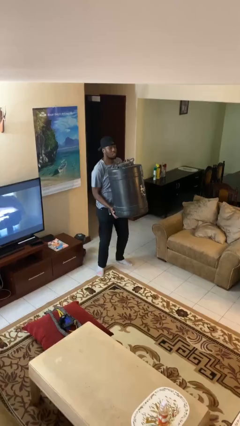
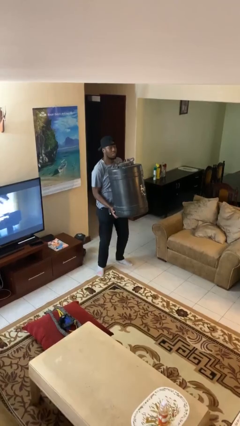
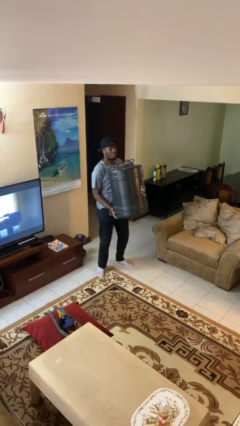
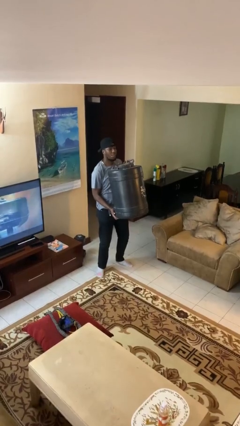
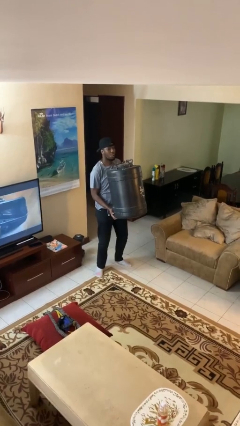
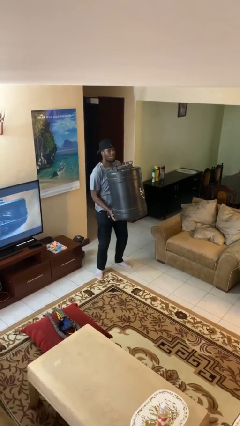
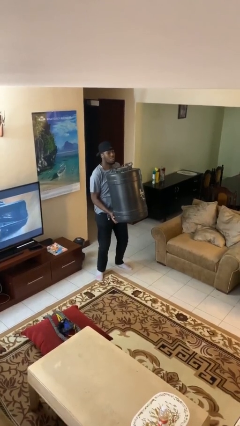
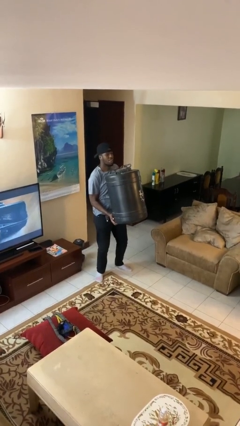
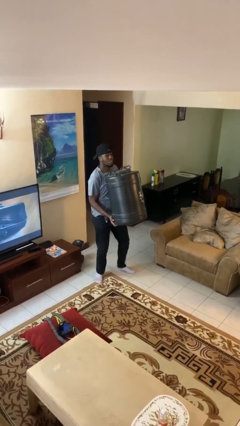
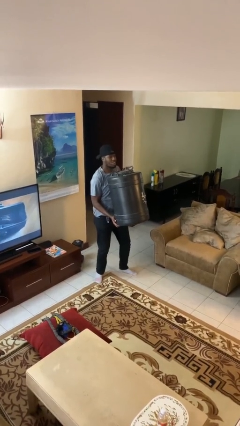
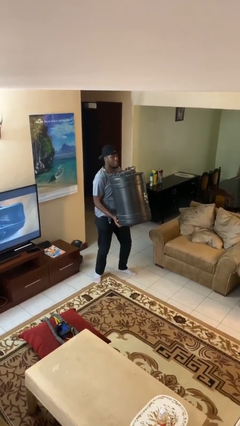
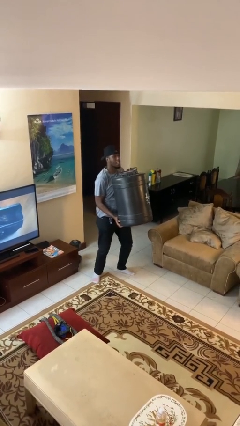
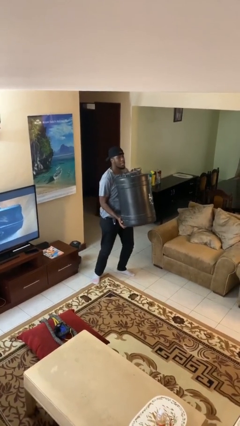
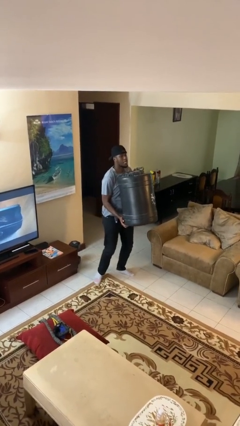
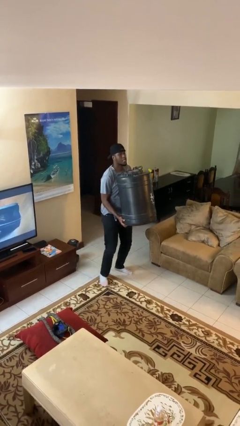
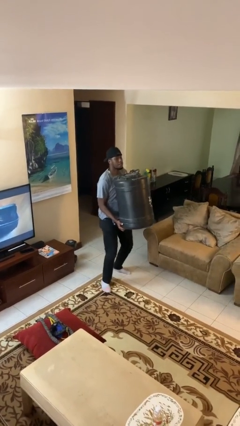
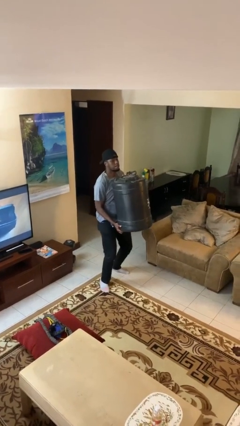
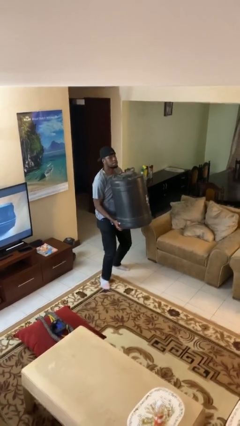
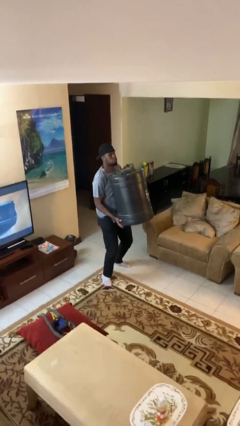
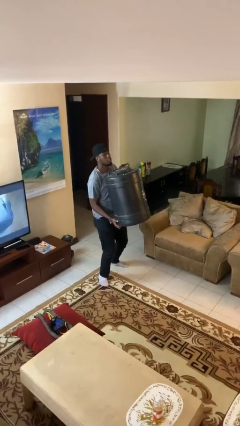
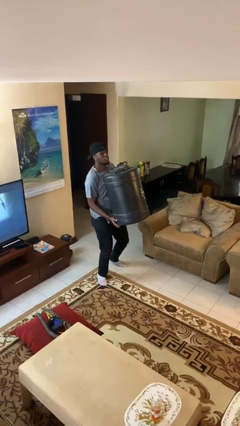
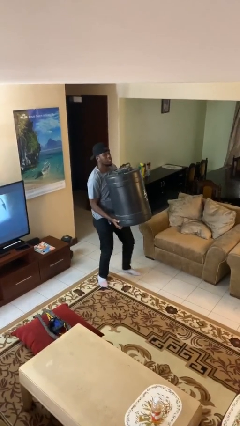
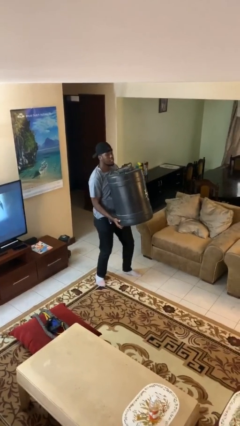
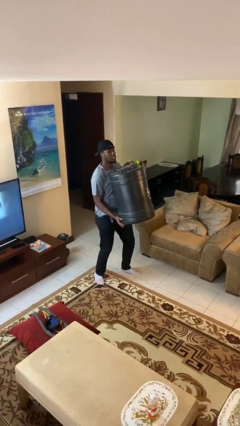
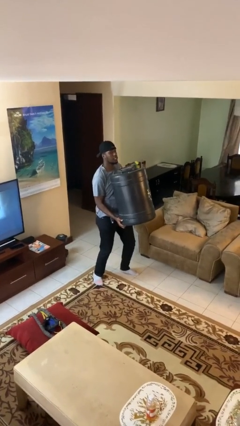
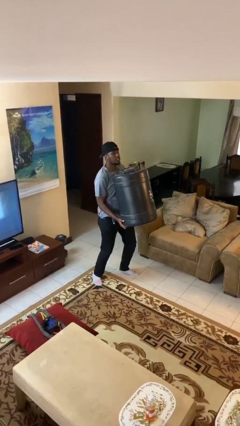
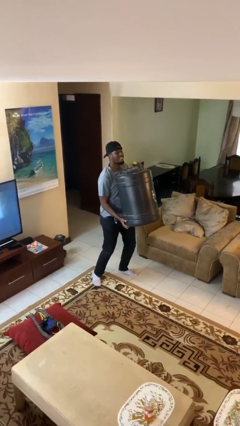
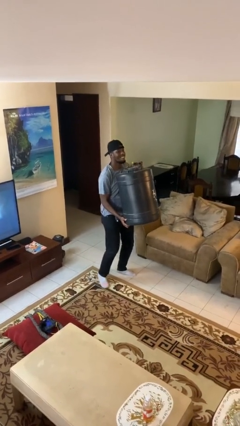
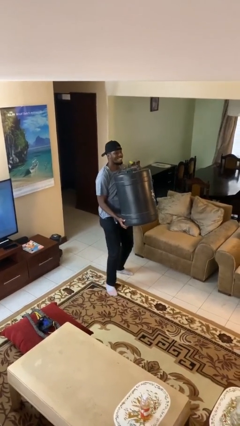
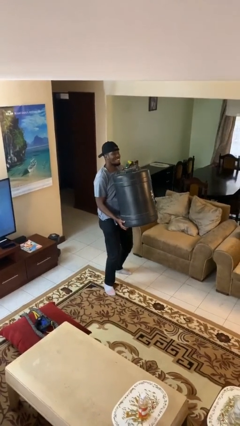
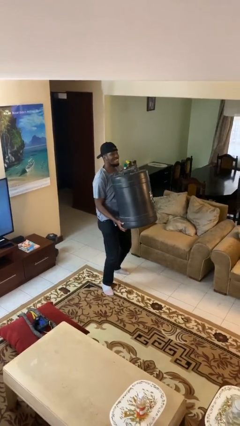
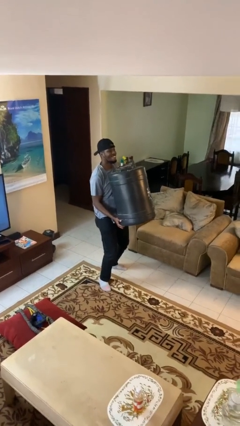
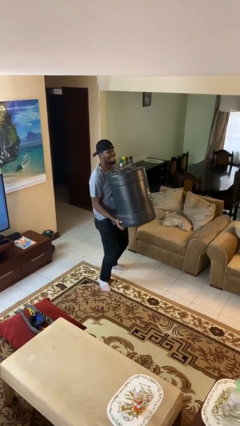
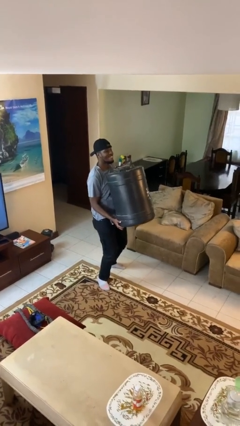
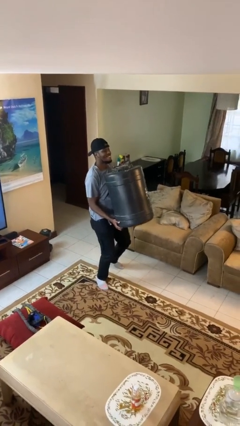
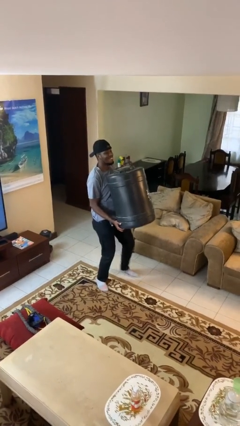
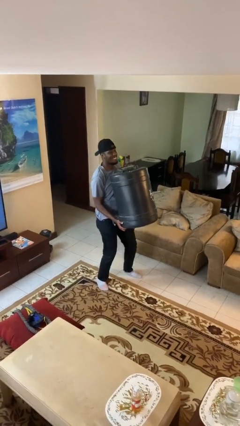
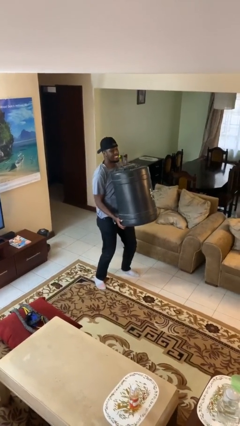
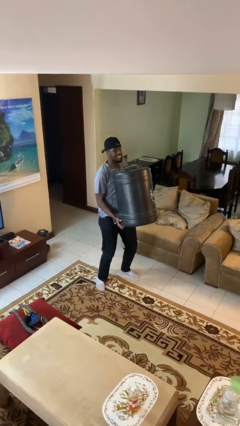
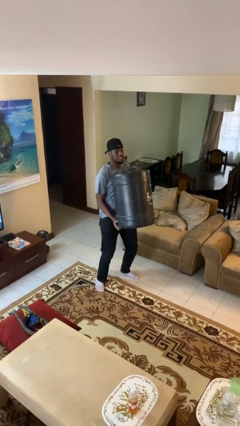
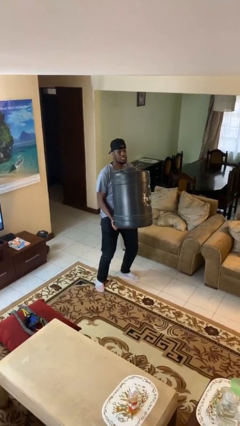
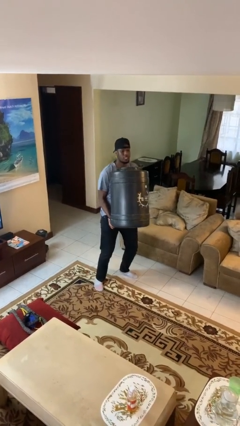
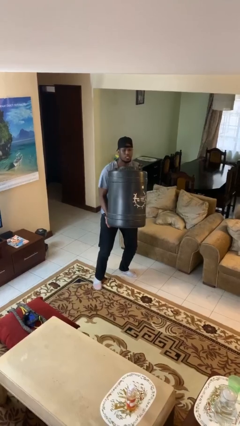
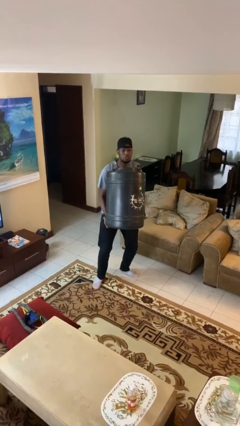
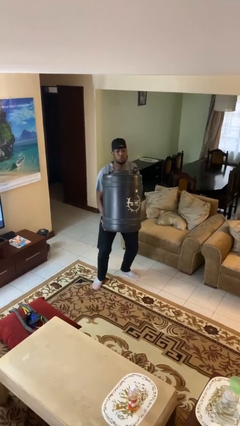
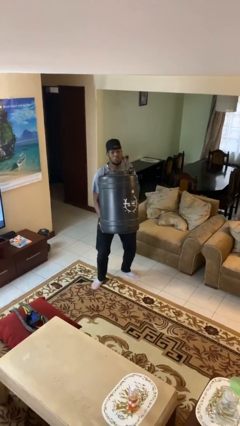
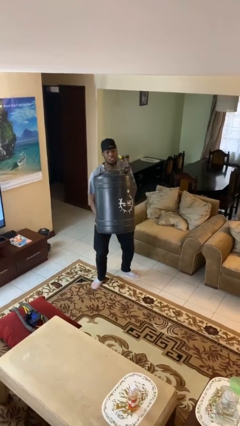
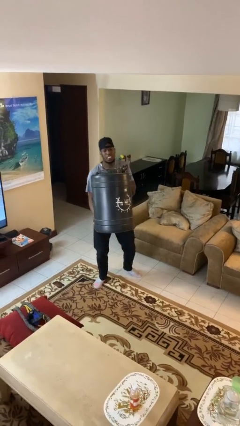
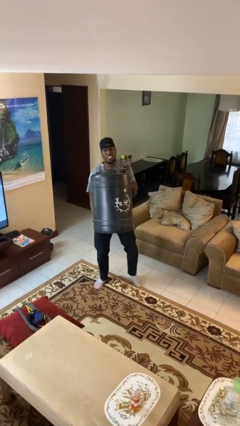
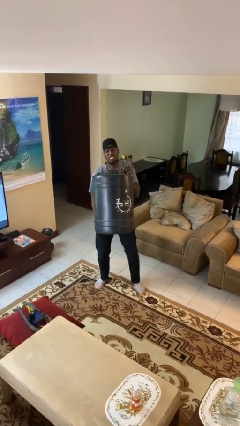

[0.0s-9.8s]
person carries heavy object

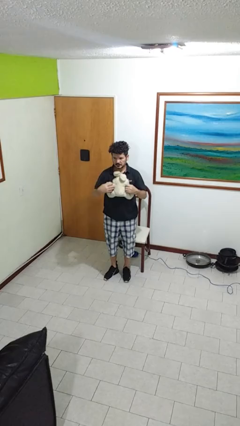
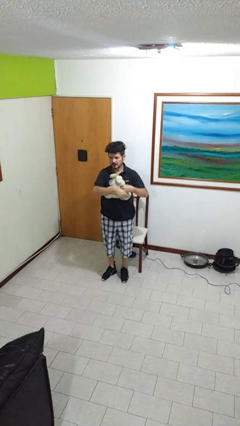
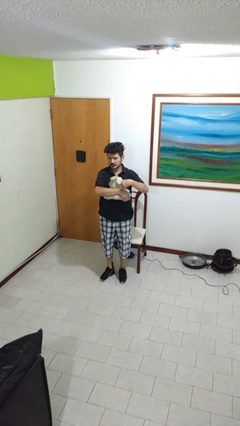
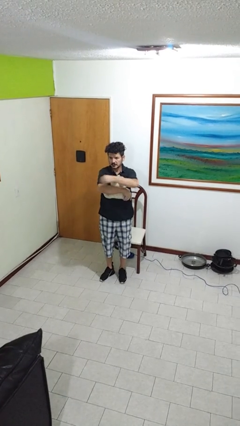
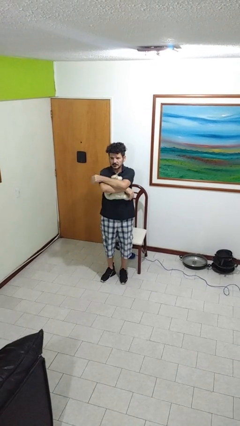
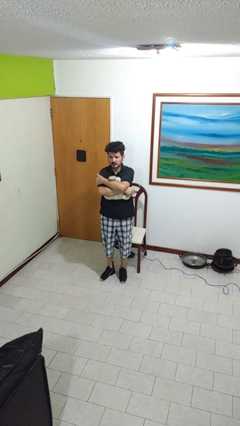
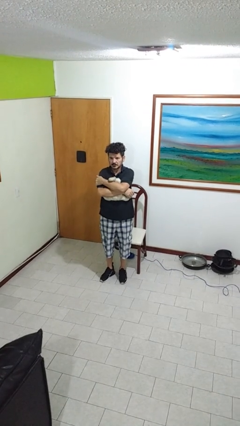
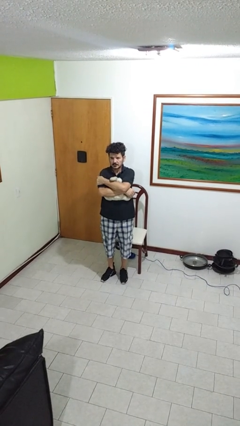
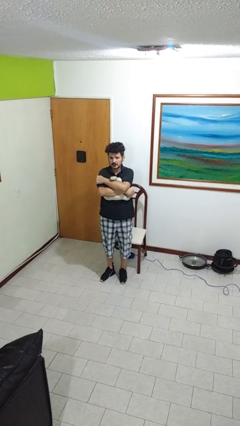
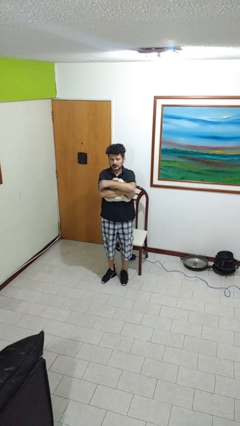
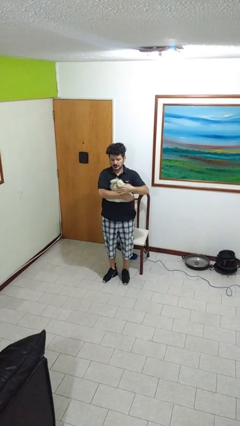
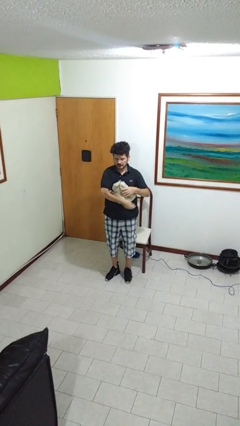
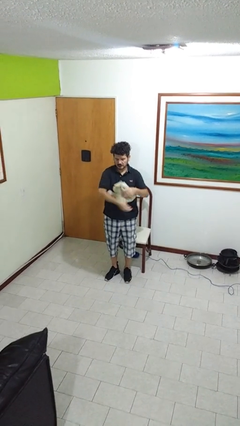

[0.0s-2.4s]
person hugs stuffed animal

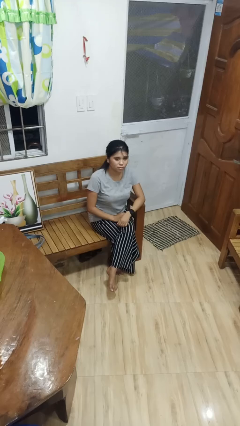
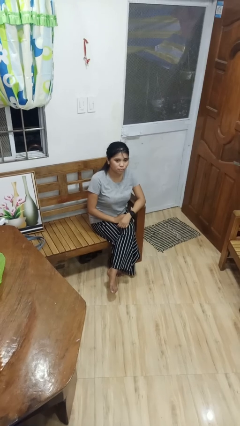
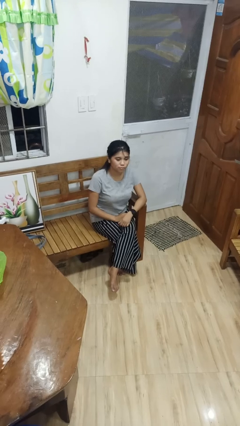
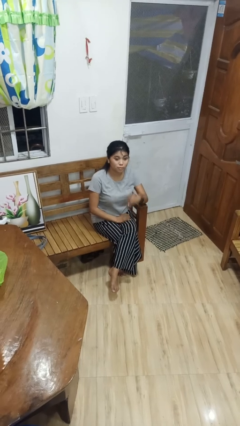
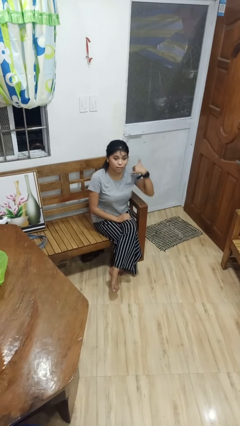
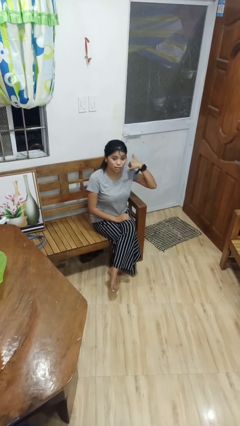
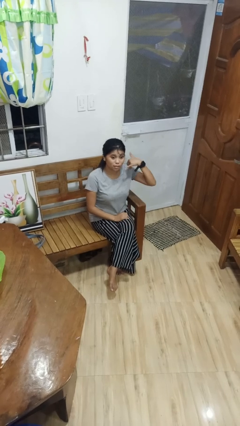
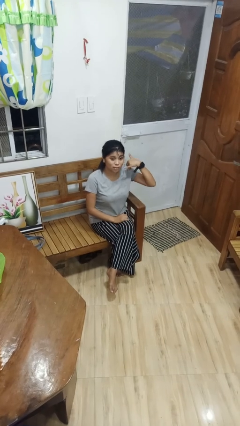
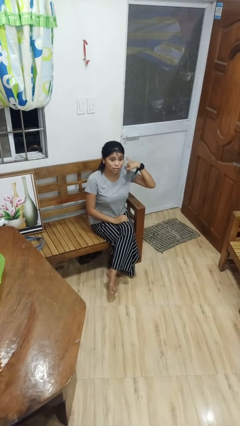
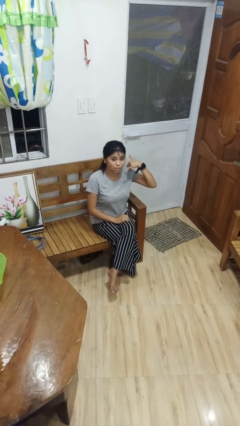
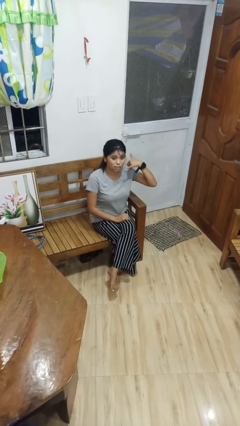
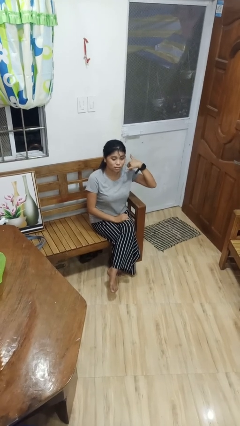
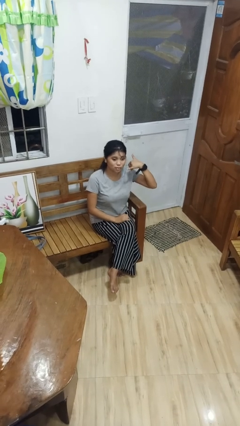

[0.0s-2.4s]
person gestures call me

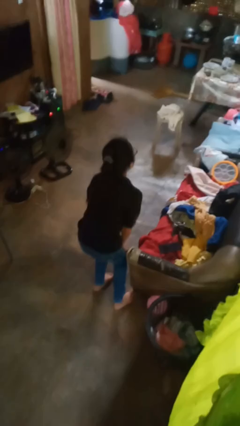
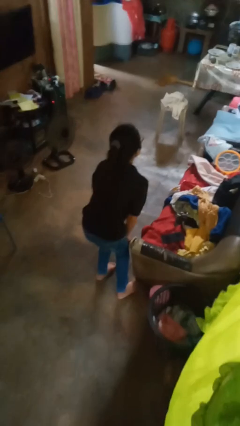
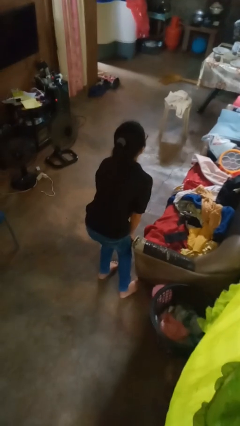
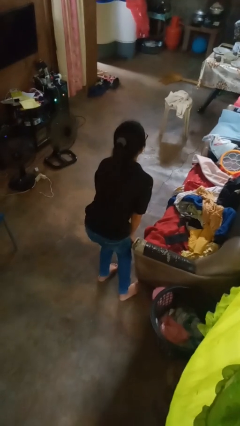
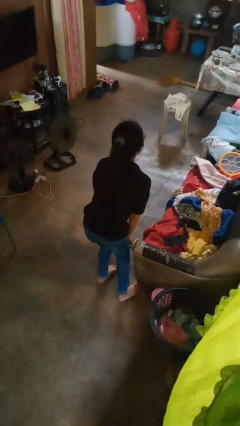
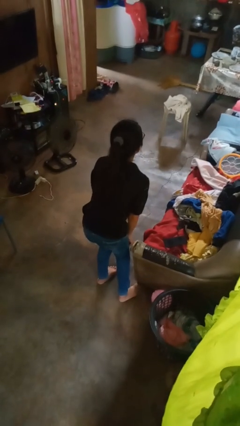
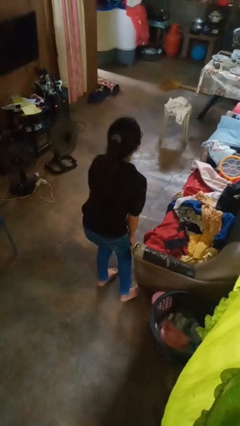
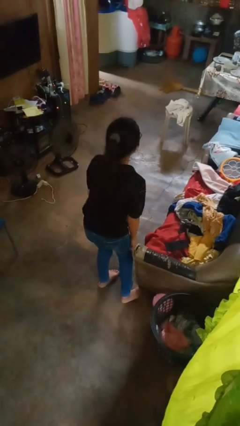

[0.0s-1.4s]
person stubs toe

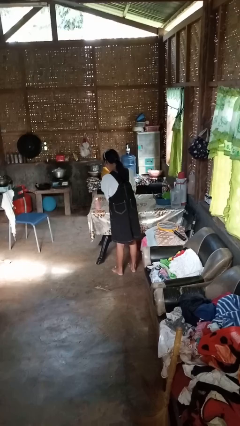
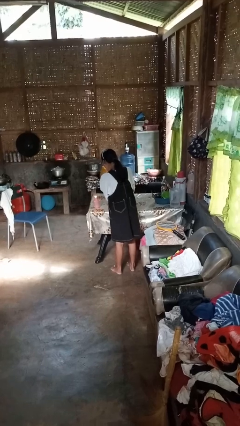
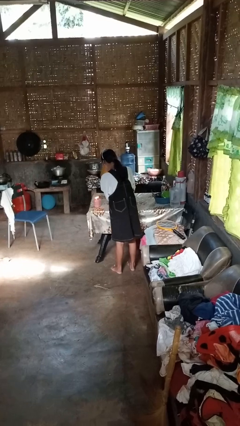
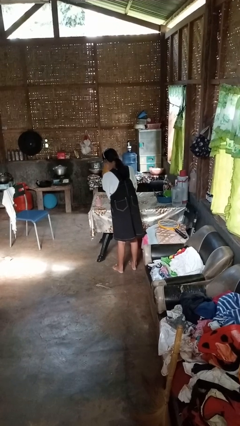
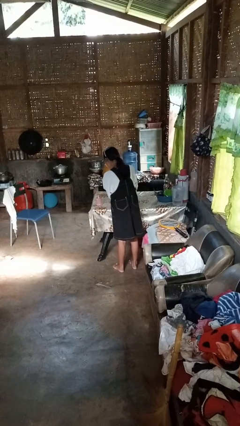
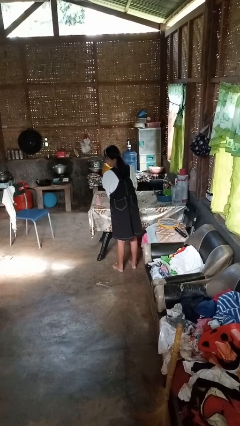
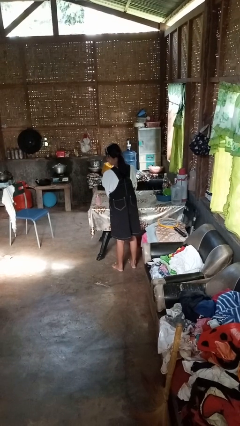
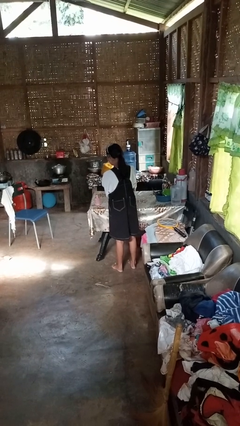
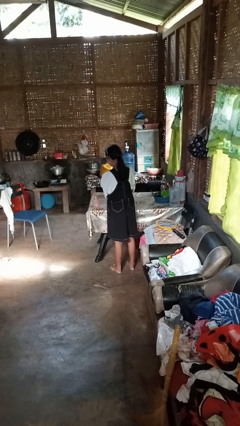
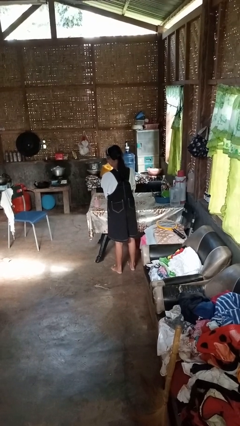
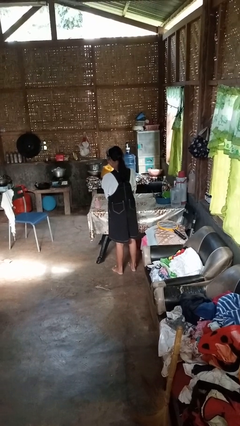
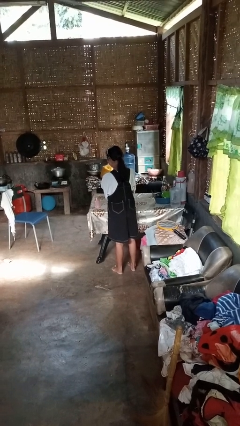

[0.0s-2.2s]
person extinguishes candle
